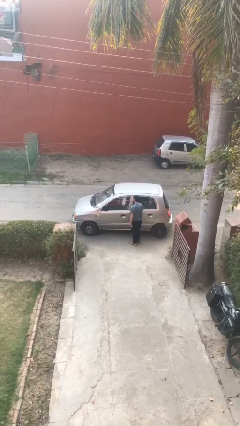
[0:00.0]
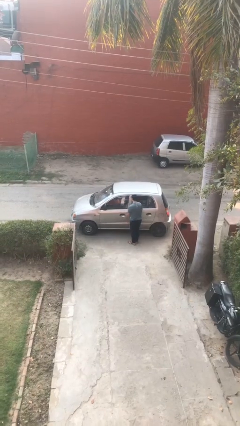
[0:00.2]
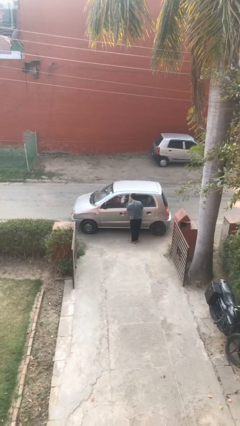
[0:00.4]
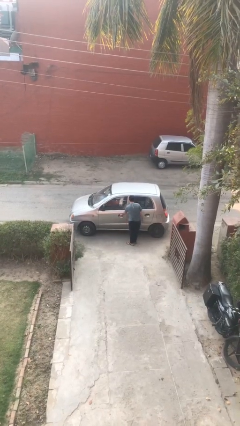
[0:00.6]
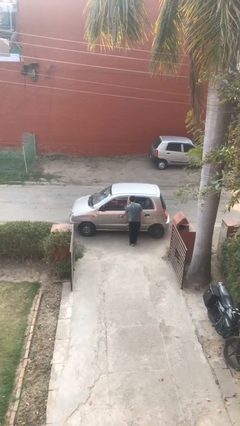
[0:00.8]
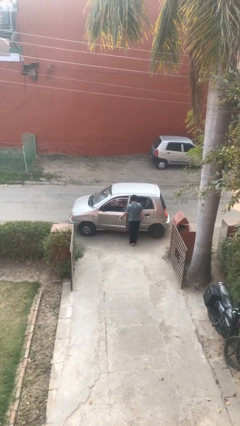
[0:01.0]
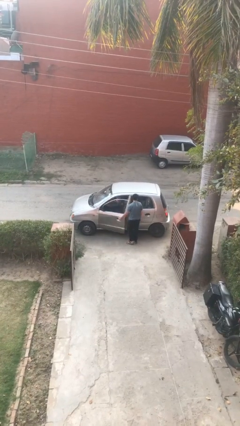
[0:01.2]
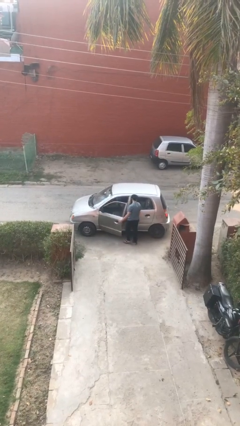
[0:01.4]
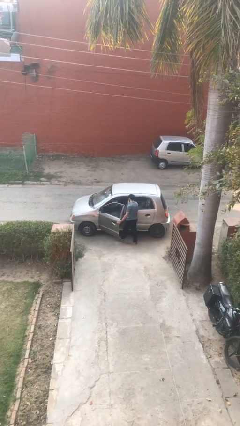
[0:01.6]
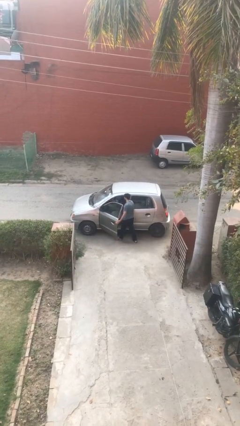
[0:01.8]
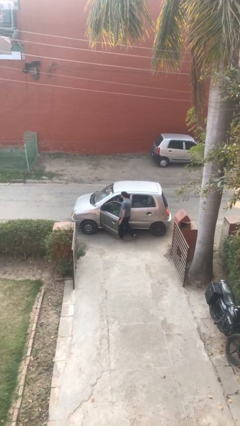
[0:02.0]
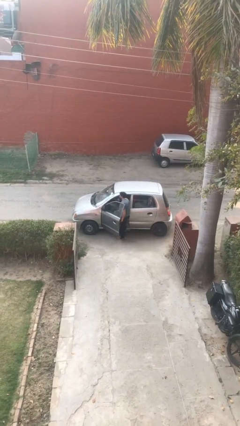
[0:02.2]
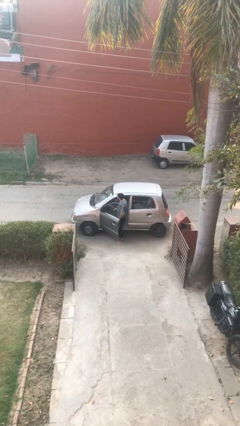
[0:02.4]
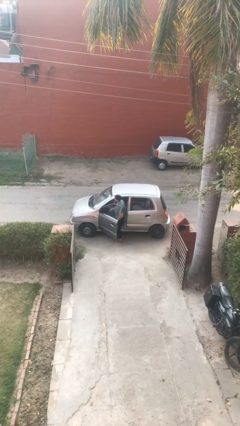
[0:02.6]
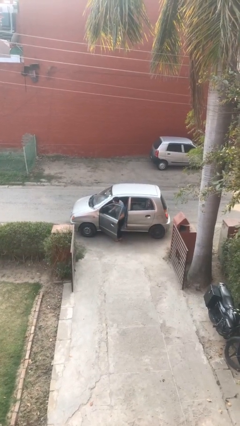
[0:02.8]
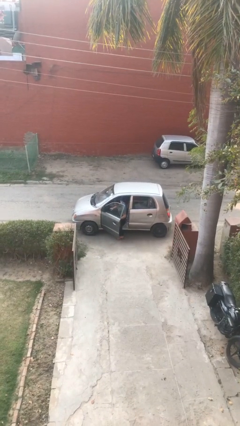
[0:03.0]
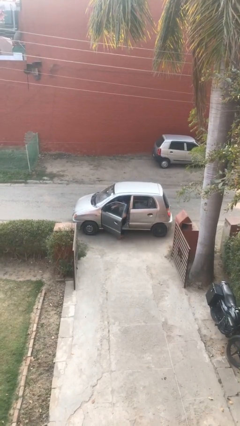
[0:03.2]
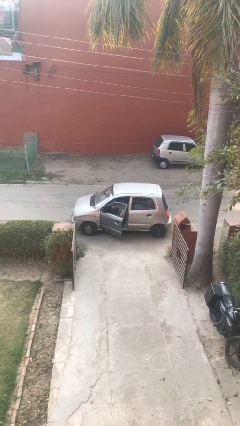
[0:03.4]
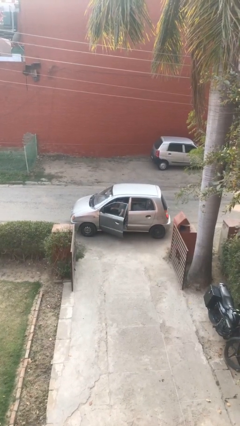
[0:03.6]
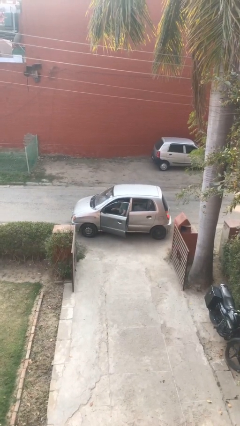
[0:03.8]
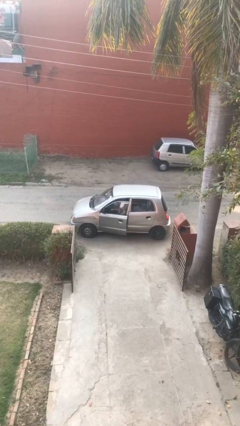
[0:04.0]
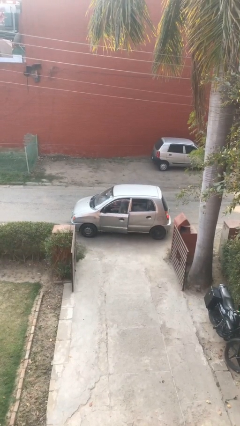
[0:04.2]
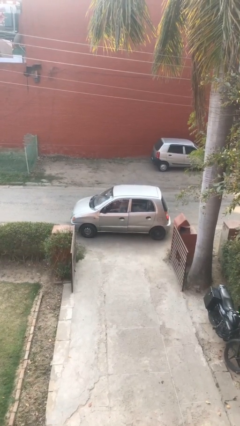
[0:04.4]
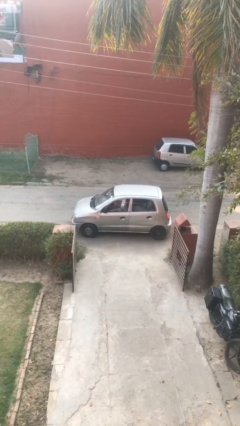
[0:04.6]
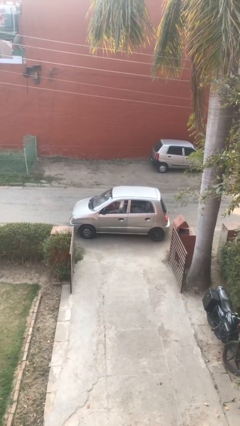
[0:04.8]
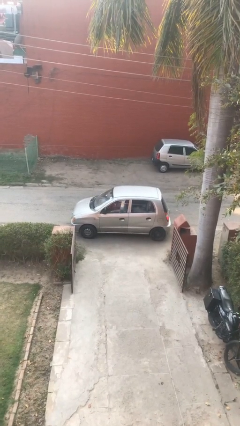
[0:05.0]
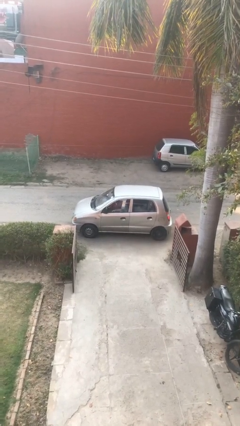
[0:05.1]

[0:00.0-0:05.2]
car picks up person

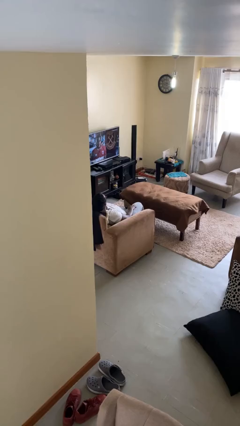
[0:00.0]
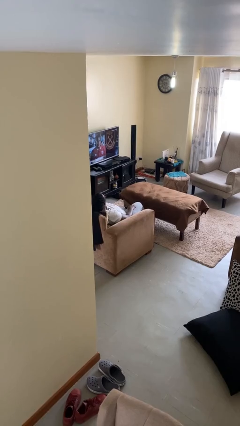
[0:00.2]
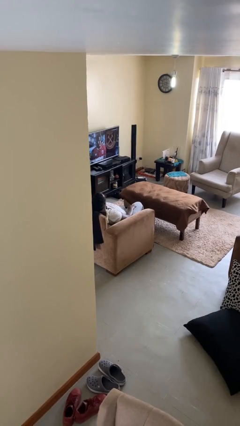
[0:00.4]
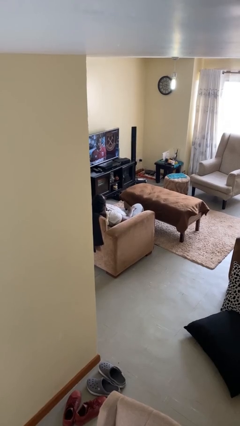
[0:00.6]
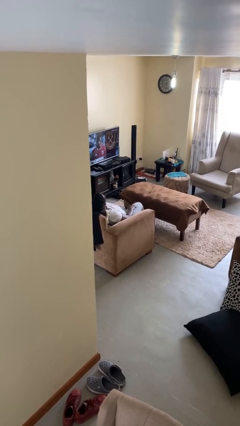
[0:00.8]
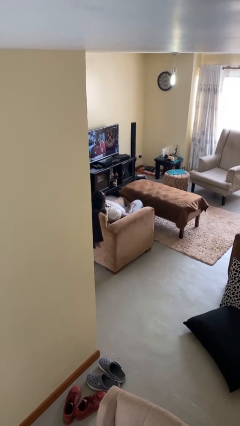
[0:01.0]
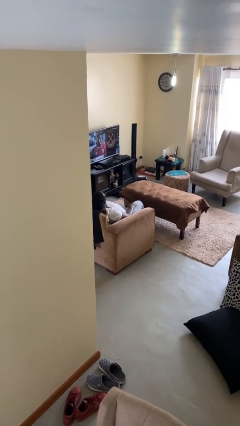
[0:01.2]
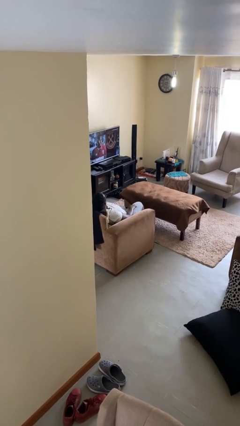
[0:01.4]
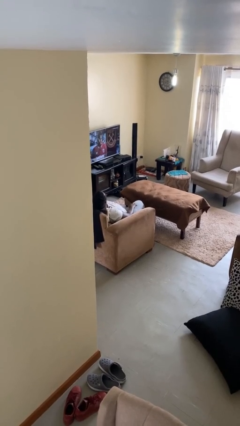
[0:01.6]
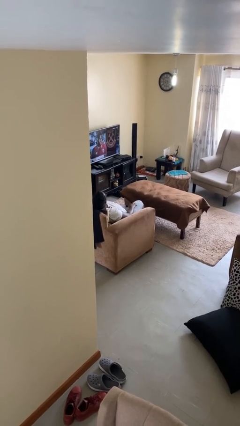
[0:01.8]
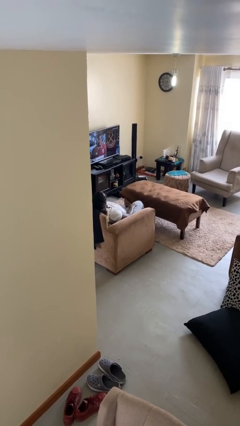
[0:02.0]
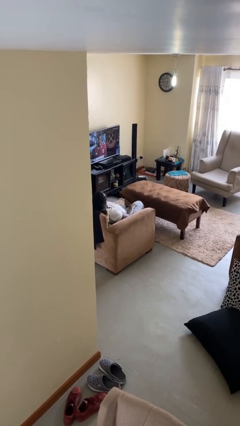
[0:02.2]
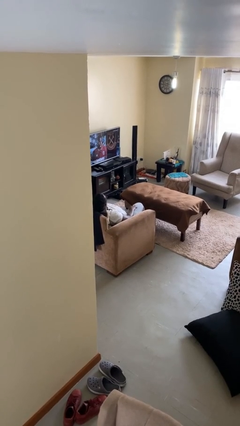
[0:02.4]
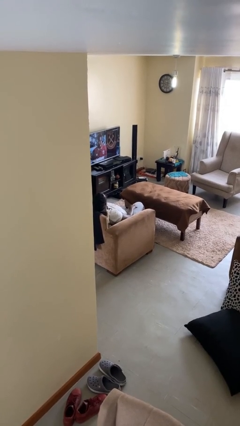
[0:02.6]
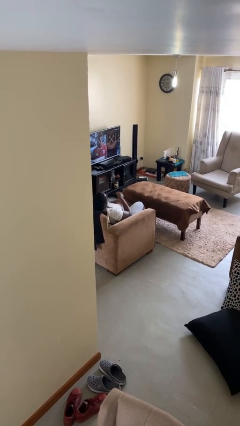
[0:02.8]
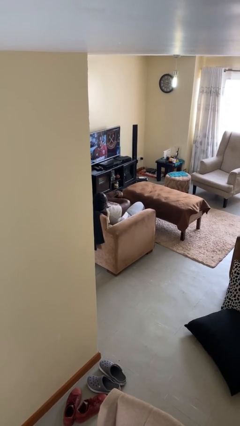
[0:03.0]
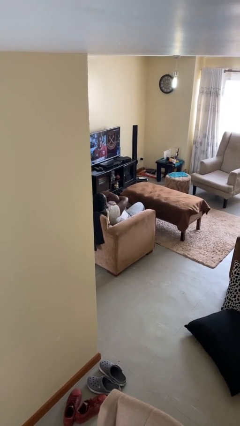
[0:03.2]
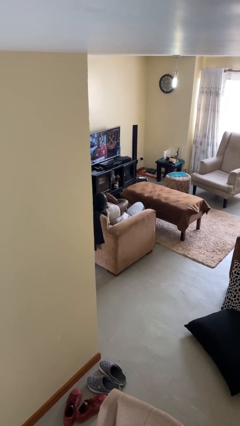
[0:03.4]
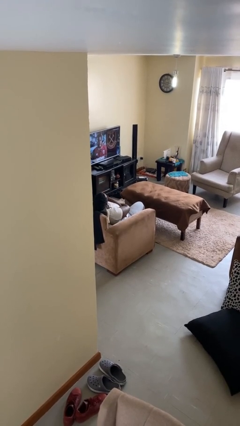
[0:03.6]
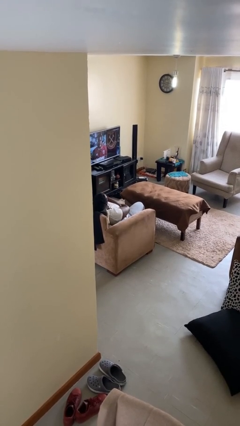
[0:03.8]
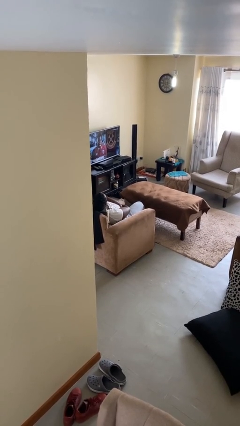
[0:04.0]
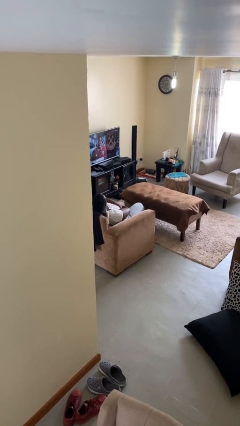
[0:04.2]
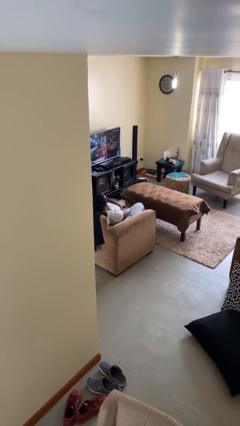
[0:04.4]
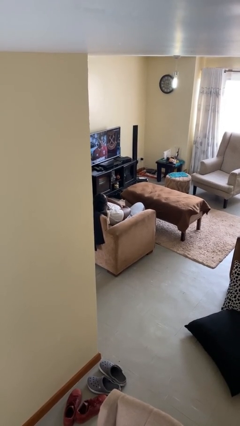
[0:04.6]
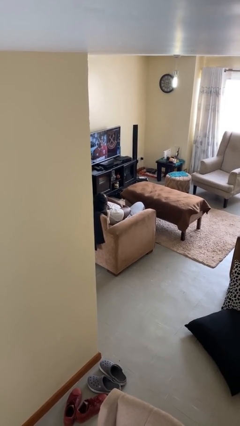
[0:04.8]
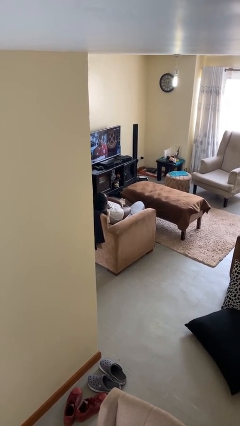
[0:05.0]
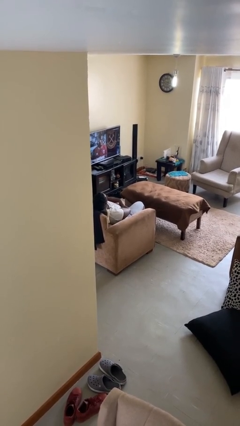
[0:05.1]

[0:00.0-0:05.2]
person crosses arms

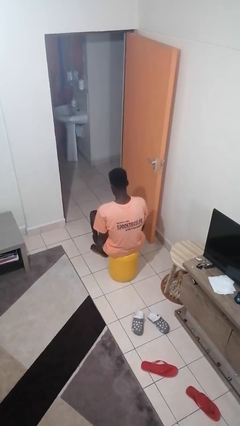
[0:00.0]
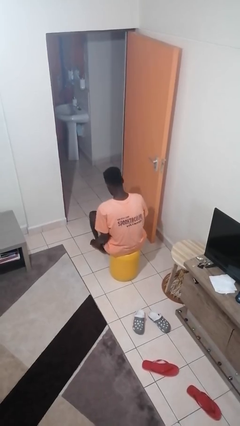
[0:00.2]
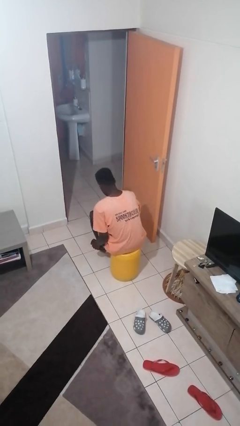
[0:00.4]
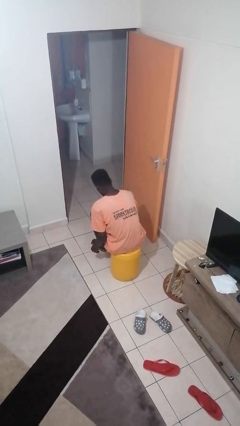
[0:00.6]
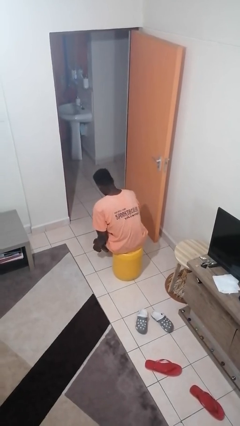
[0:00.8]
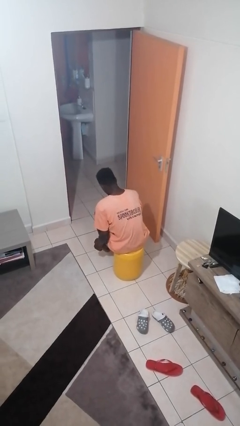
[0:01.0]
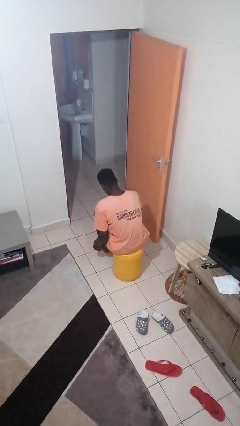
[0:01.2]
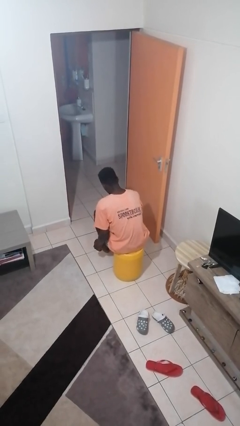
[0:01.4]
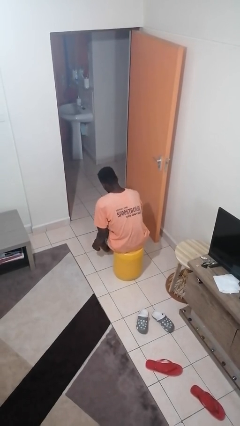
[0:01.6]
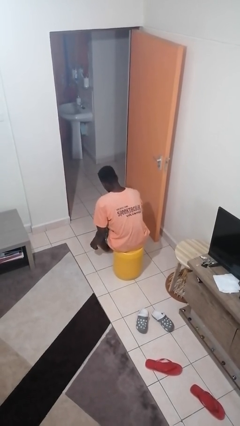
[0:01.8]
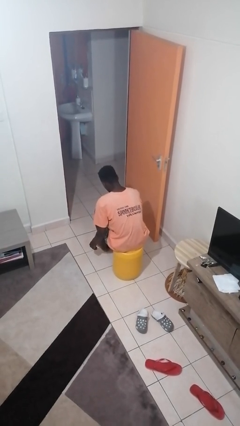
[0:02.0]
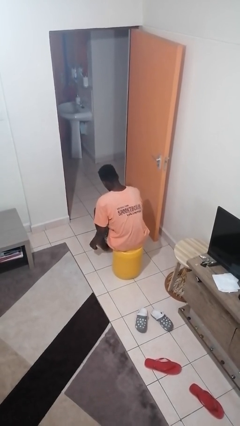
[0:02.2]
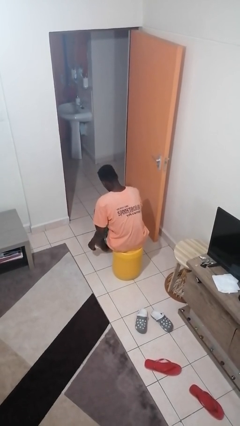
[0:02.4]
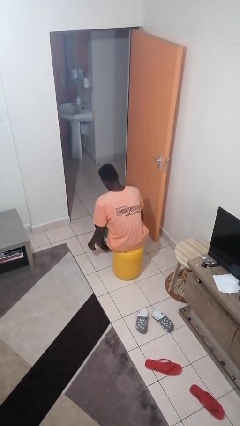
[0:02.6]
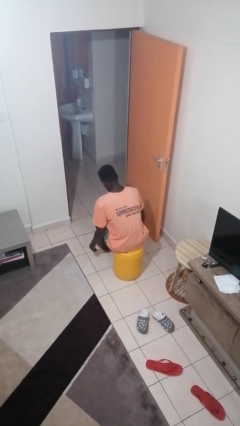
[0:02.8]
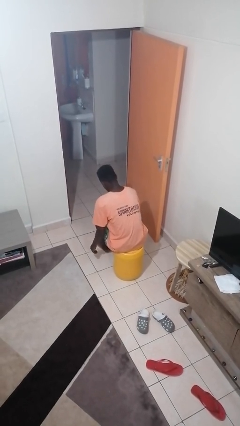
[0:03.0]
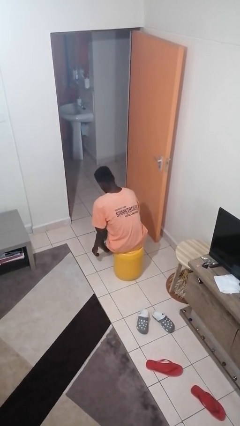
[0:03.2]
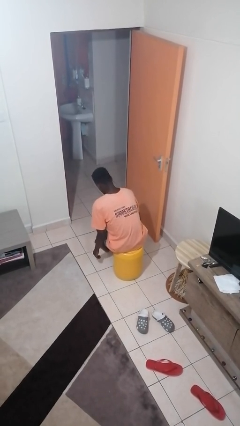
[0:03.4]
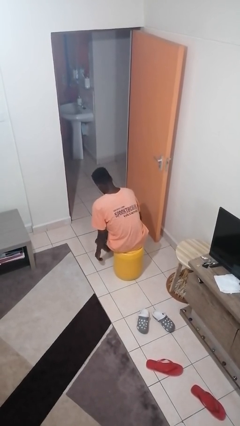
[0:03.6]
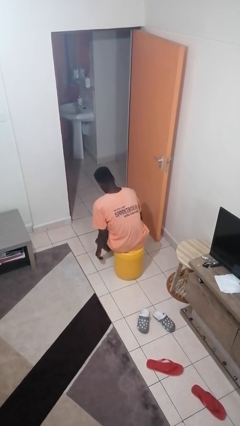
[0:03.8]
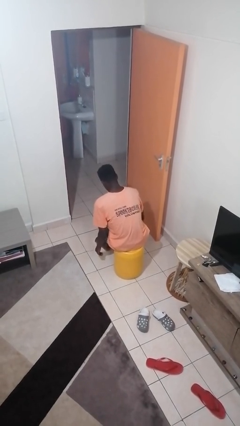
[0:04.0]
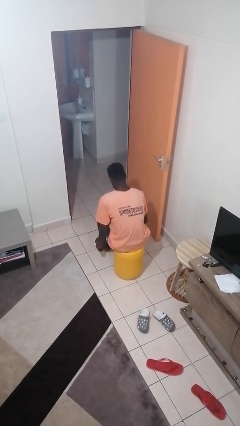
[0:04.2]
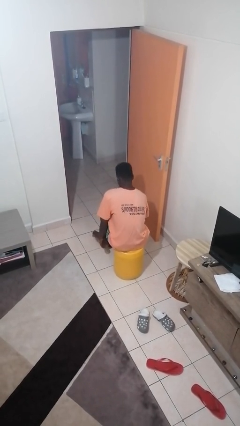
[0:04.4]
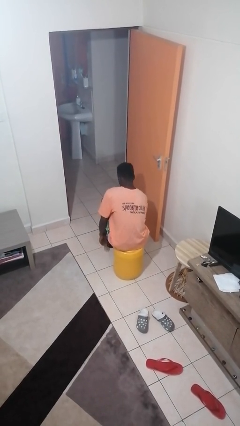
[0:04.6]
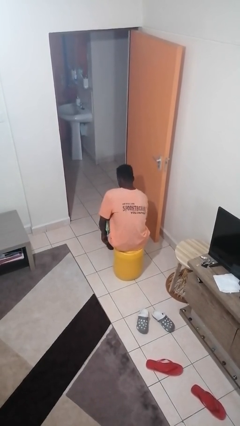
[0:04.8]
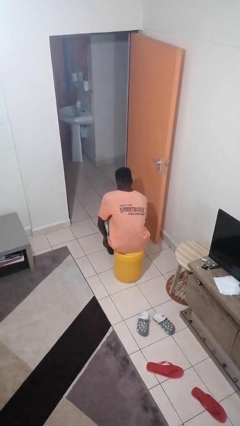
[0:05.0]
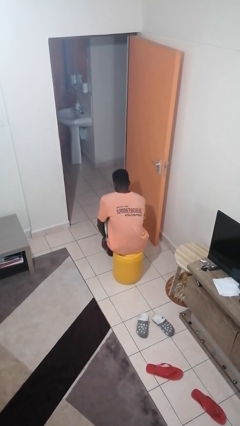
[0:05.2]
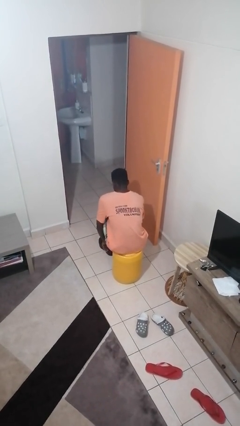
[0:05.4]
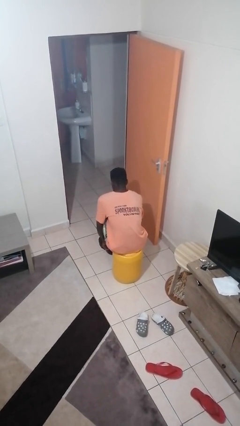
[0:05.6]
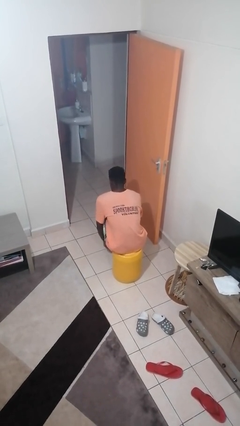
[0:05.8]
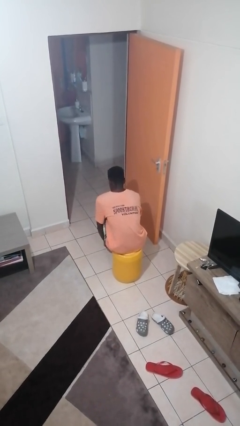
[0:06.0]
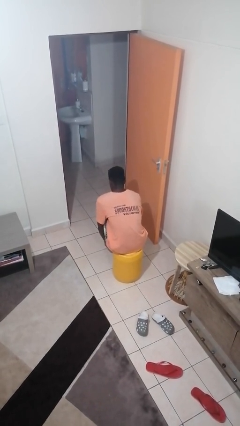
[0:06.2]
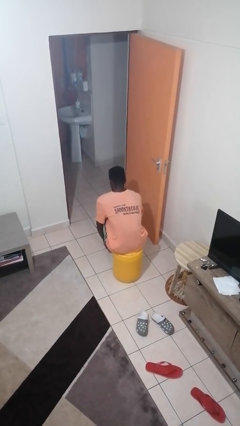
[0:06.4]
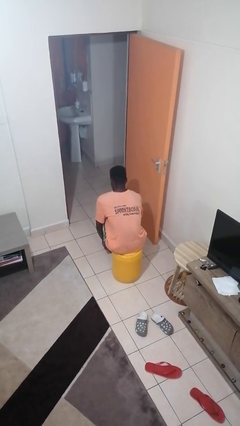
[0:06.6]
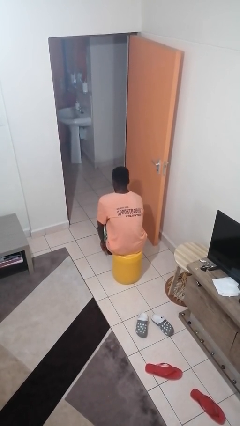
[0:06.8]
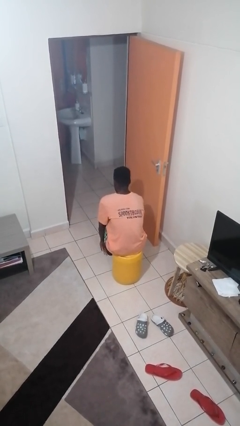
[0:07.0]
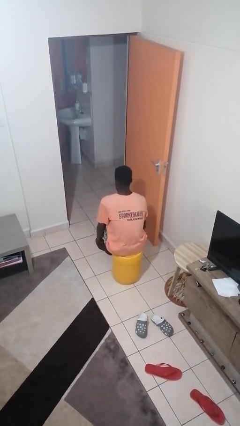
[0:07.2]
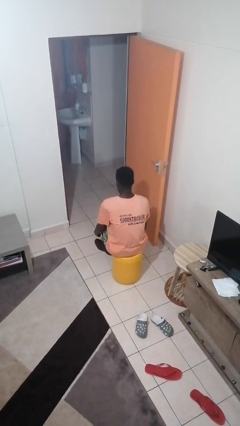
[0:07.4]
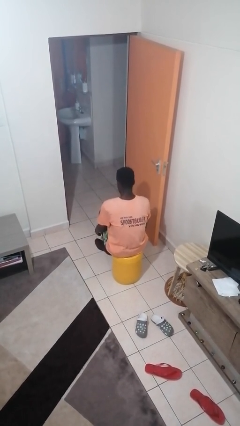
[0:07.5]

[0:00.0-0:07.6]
person puts on shoes
